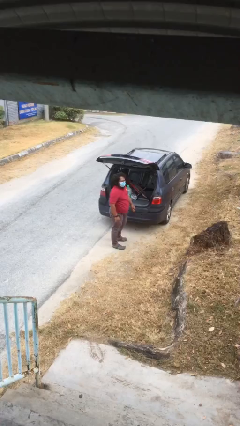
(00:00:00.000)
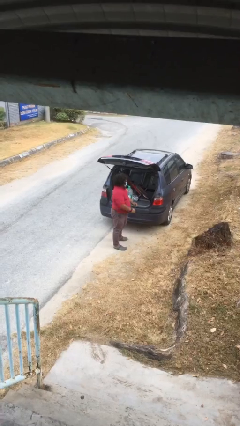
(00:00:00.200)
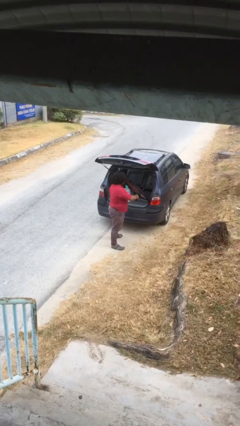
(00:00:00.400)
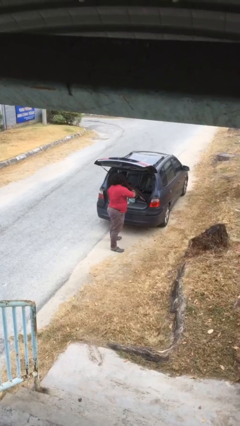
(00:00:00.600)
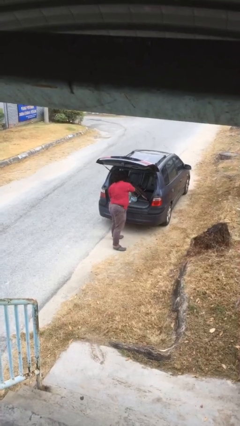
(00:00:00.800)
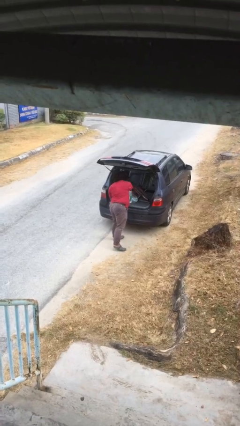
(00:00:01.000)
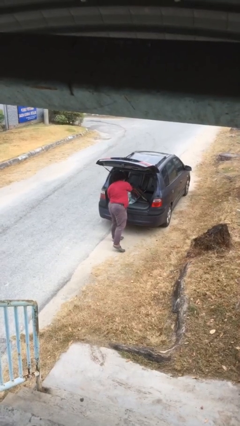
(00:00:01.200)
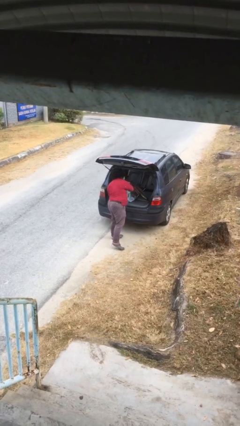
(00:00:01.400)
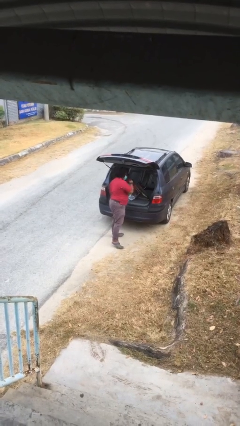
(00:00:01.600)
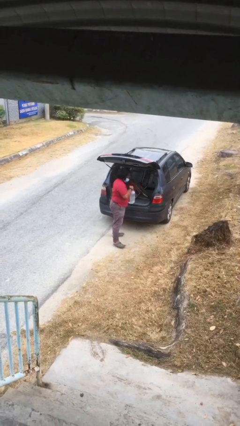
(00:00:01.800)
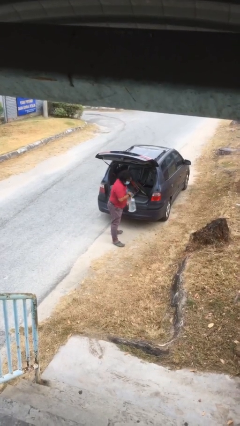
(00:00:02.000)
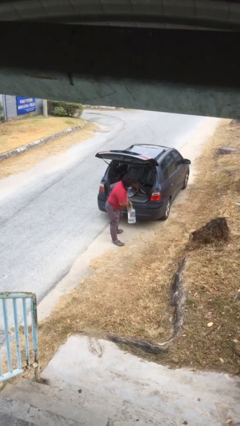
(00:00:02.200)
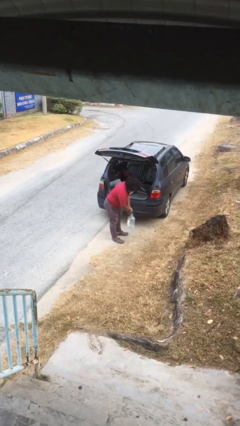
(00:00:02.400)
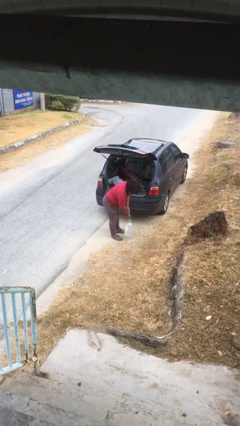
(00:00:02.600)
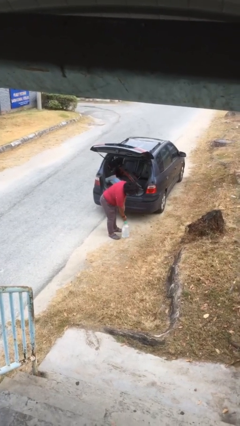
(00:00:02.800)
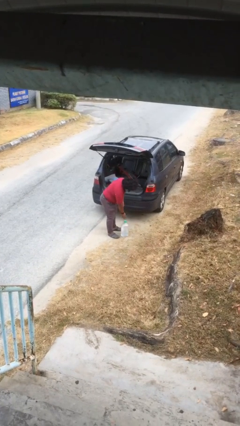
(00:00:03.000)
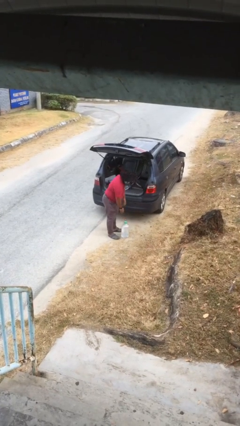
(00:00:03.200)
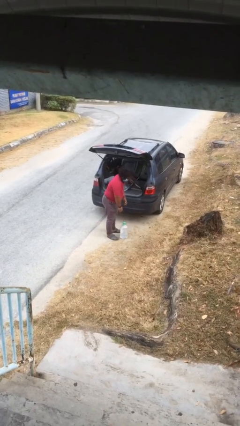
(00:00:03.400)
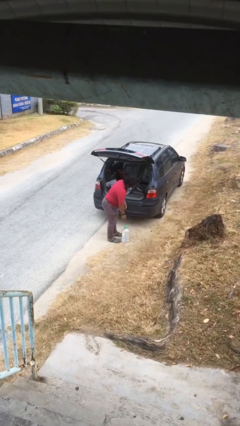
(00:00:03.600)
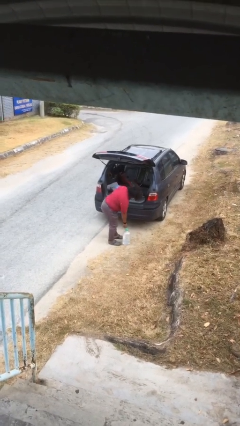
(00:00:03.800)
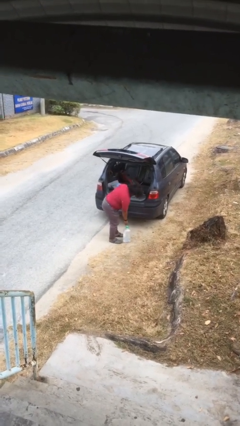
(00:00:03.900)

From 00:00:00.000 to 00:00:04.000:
person unloads car

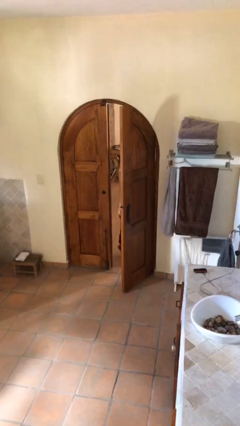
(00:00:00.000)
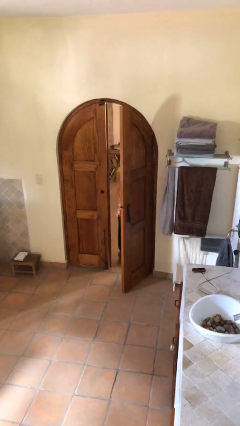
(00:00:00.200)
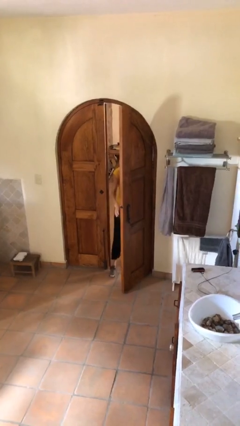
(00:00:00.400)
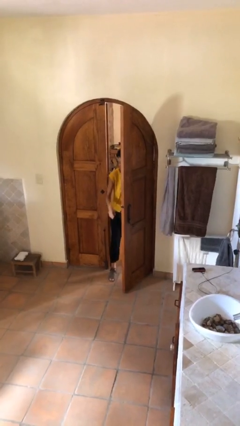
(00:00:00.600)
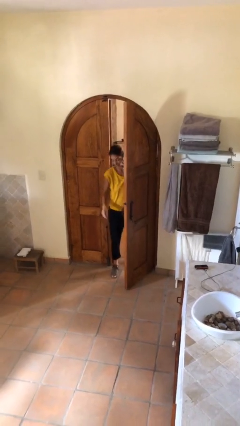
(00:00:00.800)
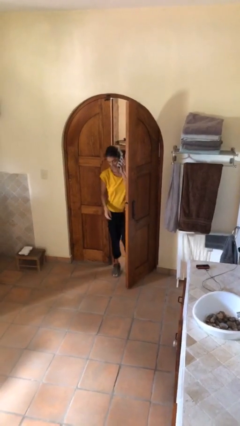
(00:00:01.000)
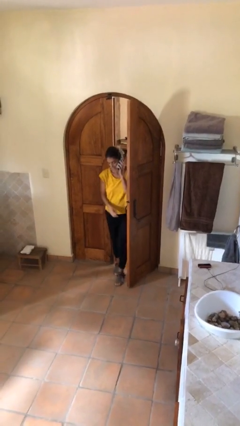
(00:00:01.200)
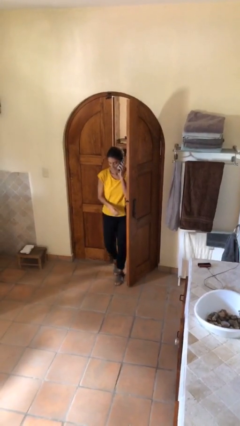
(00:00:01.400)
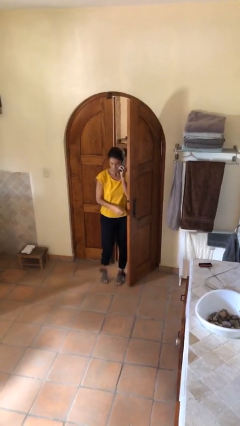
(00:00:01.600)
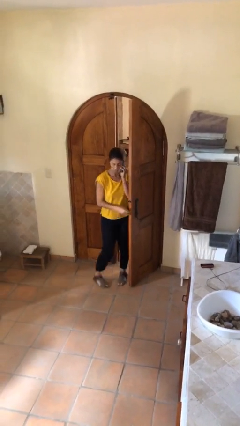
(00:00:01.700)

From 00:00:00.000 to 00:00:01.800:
person enters scene through structure

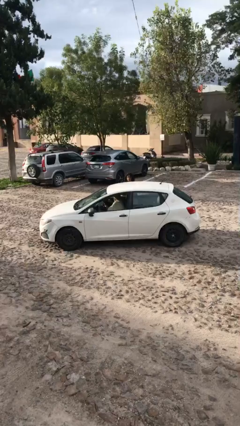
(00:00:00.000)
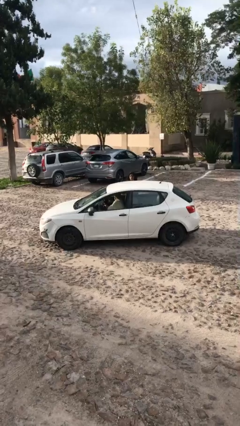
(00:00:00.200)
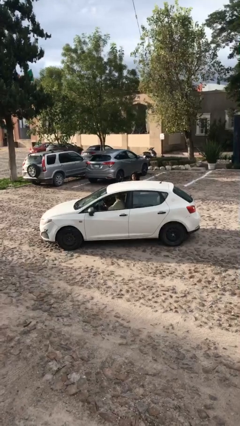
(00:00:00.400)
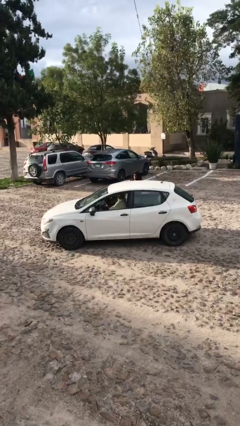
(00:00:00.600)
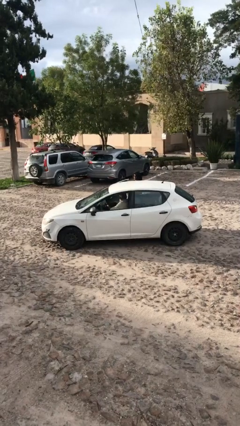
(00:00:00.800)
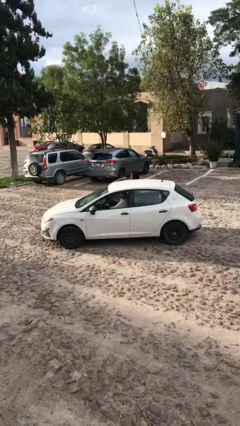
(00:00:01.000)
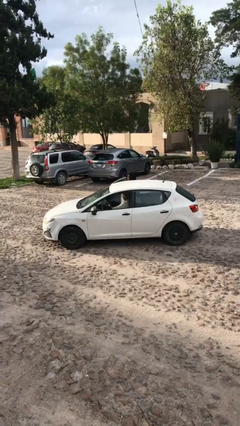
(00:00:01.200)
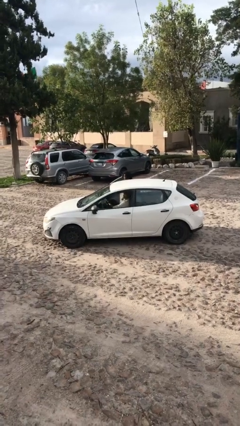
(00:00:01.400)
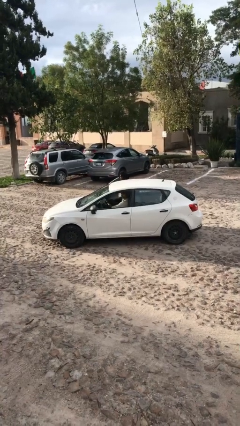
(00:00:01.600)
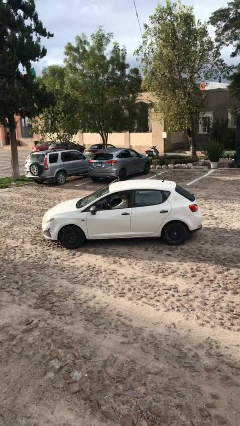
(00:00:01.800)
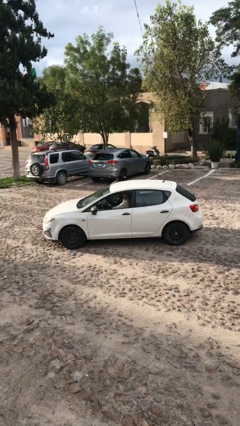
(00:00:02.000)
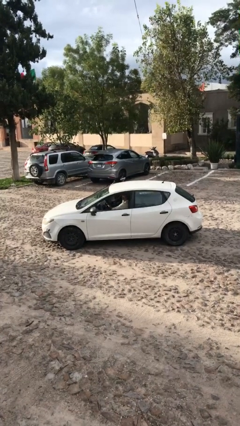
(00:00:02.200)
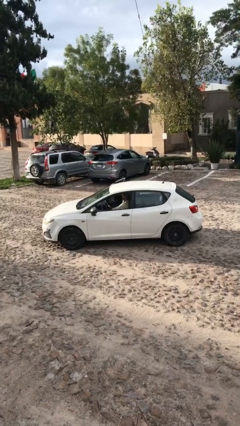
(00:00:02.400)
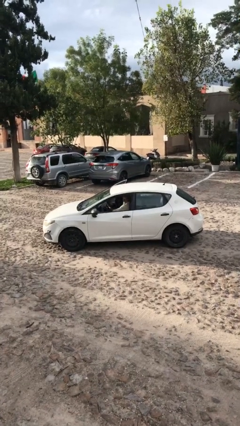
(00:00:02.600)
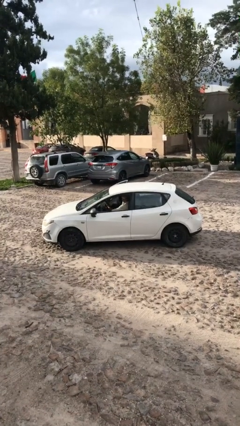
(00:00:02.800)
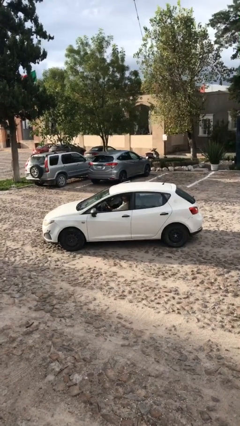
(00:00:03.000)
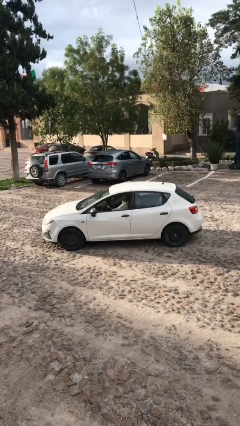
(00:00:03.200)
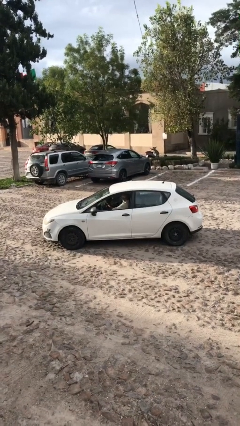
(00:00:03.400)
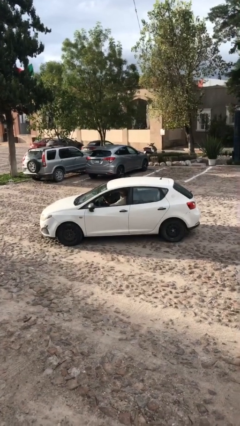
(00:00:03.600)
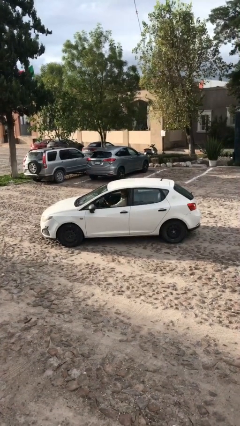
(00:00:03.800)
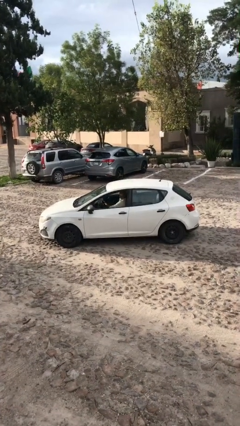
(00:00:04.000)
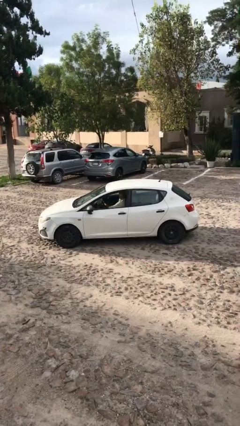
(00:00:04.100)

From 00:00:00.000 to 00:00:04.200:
car picks up person

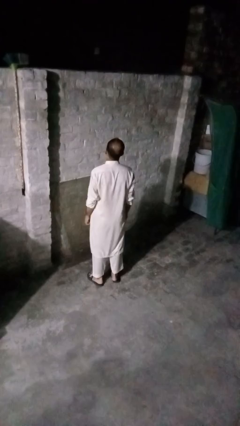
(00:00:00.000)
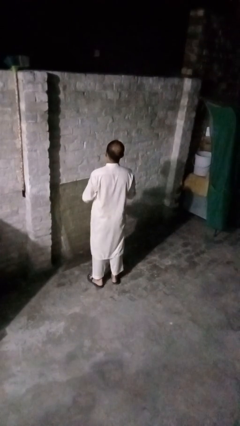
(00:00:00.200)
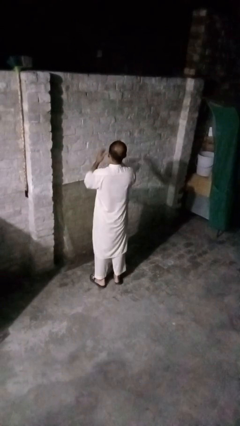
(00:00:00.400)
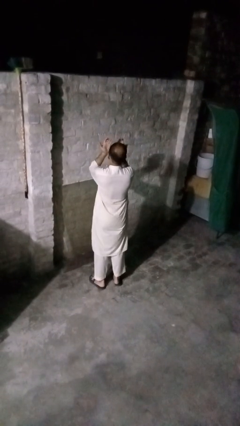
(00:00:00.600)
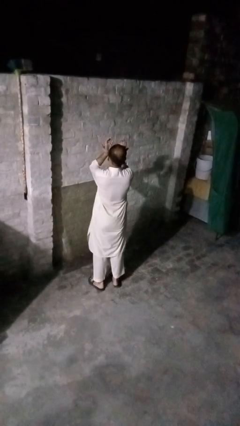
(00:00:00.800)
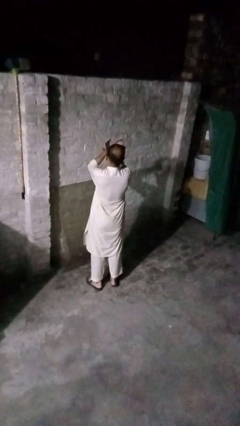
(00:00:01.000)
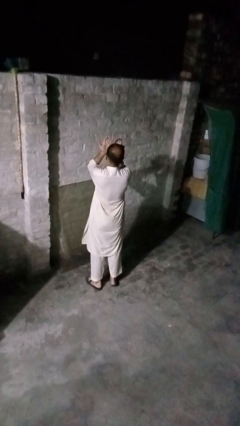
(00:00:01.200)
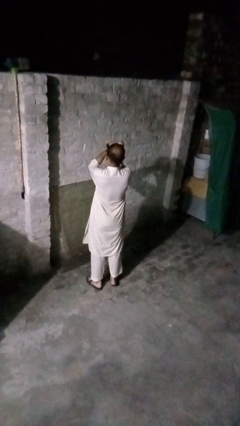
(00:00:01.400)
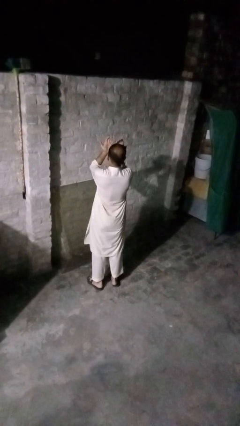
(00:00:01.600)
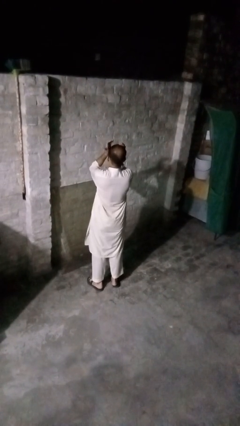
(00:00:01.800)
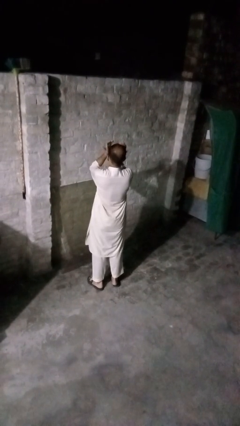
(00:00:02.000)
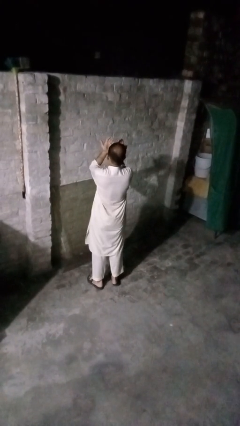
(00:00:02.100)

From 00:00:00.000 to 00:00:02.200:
person rubs eyes

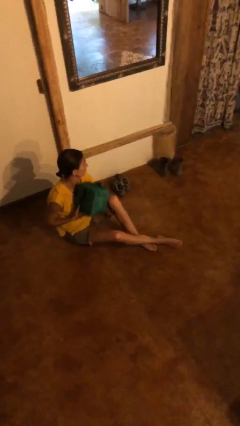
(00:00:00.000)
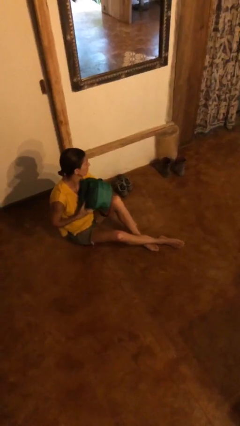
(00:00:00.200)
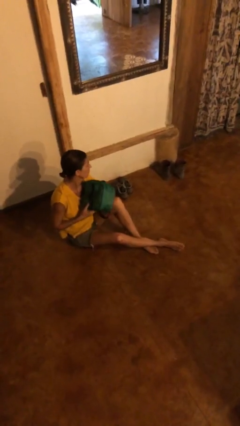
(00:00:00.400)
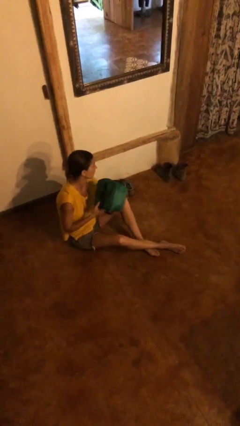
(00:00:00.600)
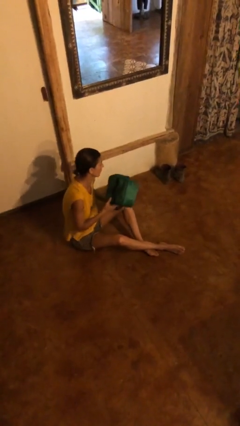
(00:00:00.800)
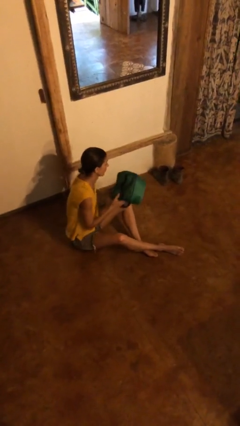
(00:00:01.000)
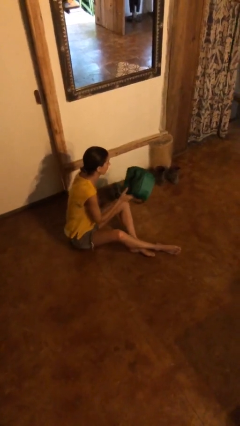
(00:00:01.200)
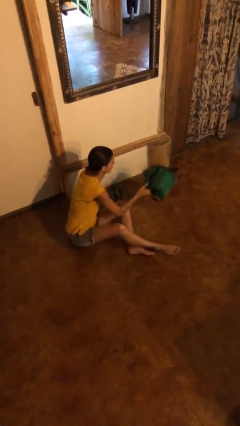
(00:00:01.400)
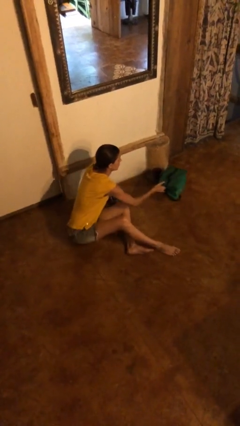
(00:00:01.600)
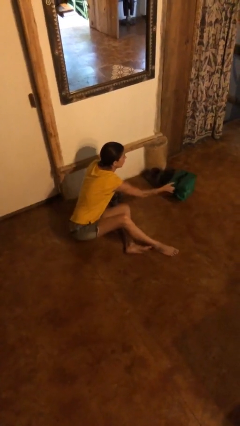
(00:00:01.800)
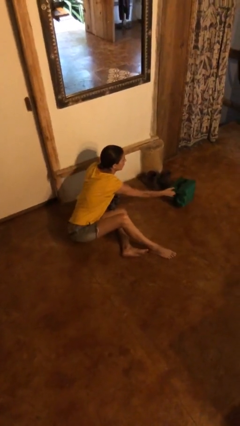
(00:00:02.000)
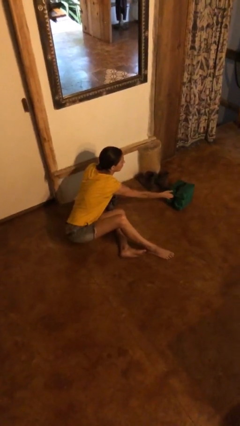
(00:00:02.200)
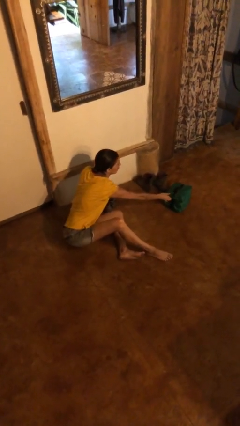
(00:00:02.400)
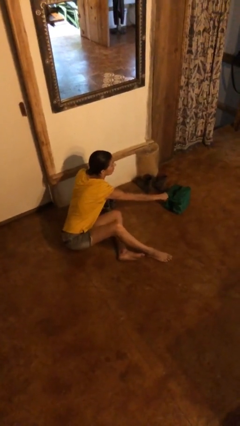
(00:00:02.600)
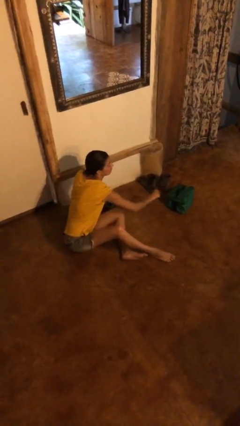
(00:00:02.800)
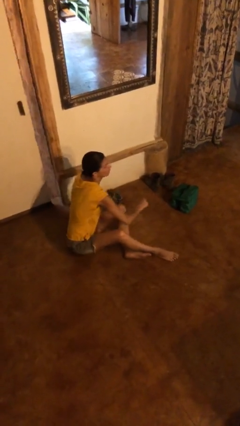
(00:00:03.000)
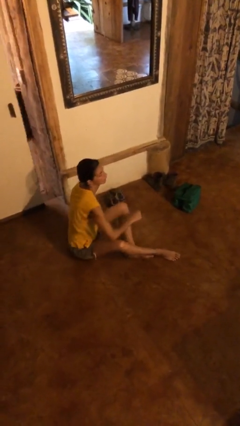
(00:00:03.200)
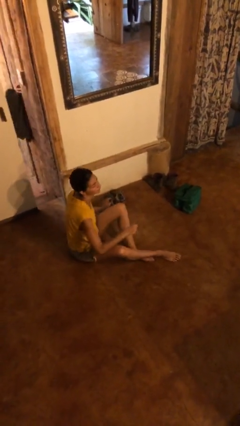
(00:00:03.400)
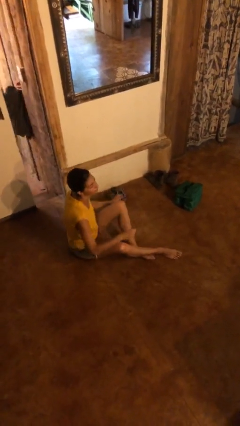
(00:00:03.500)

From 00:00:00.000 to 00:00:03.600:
person puts down object on floor

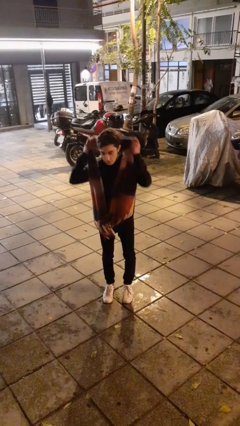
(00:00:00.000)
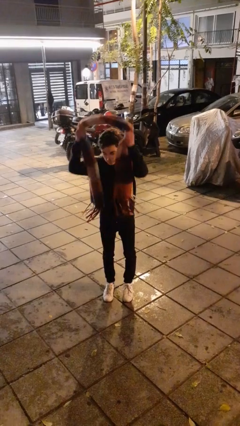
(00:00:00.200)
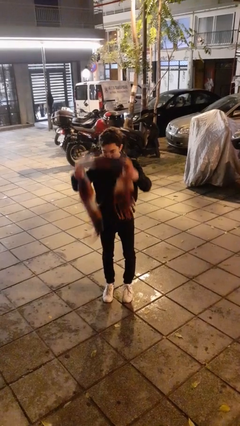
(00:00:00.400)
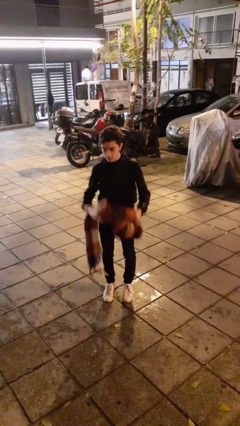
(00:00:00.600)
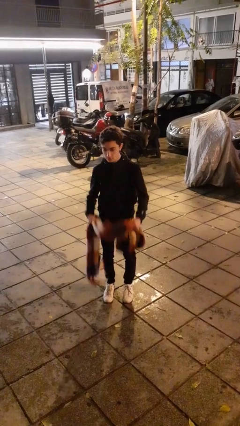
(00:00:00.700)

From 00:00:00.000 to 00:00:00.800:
person takes off scarf
